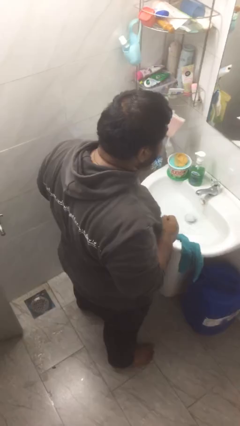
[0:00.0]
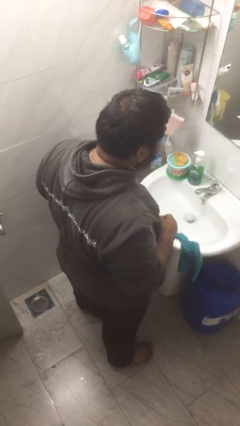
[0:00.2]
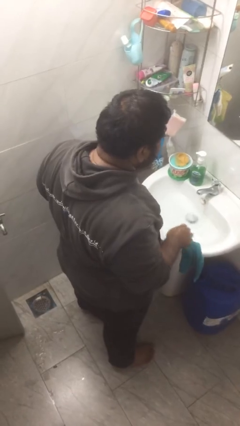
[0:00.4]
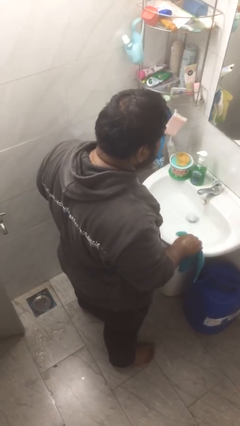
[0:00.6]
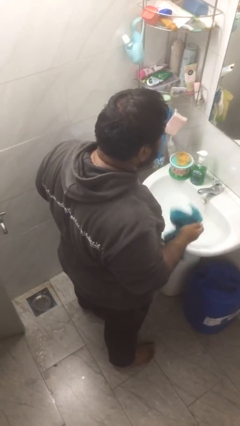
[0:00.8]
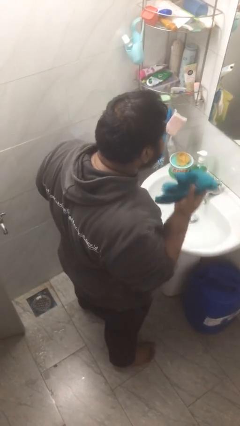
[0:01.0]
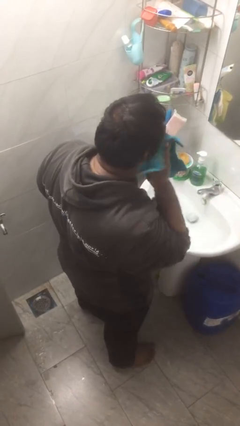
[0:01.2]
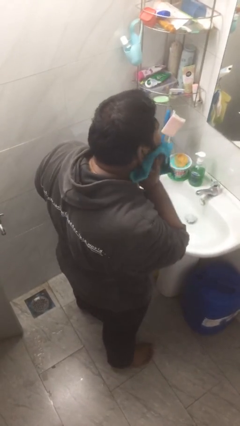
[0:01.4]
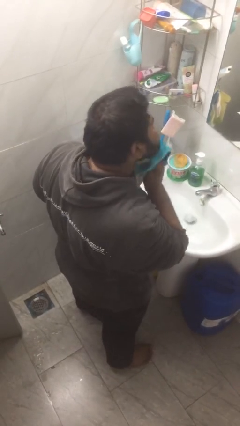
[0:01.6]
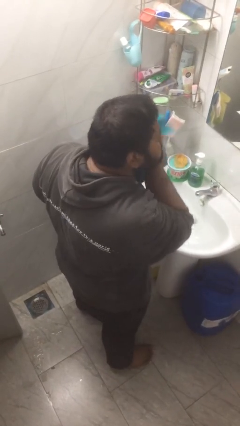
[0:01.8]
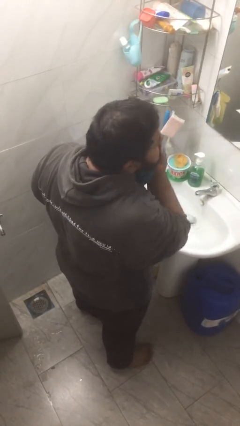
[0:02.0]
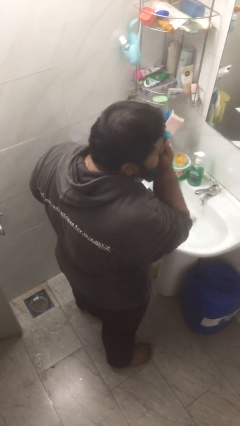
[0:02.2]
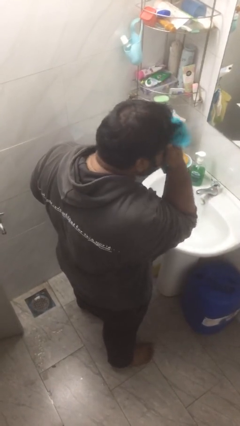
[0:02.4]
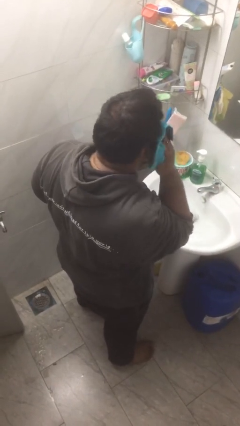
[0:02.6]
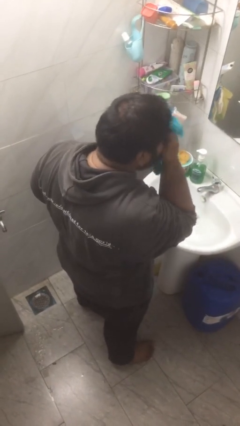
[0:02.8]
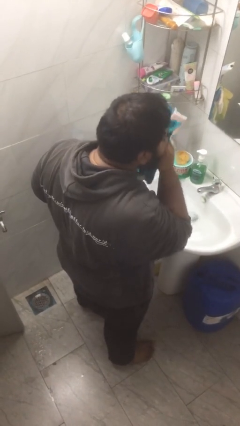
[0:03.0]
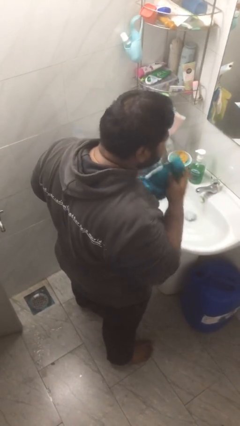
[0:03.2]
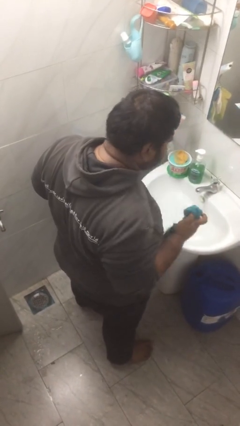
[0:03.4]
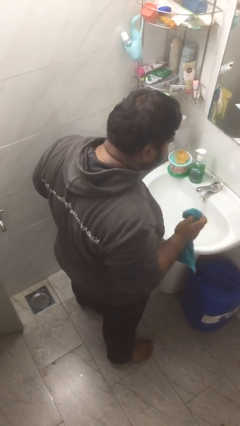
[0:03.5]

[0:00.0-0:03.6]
person dries face with towel

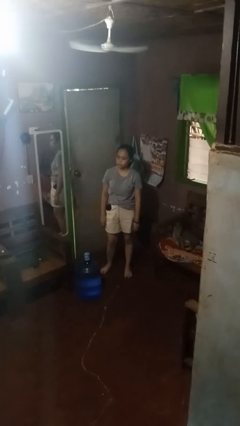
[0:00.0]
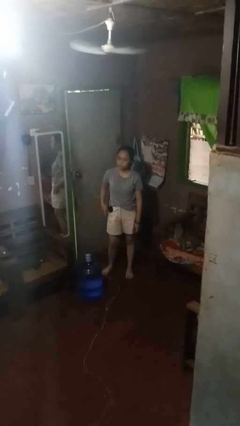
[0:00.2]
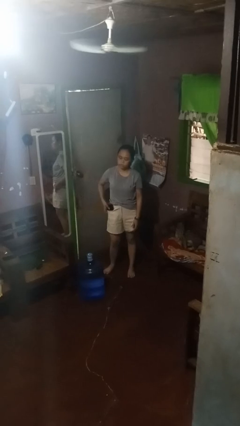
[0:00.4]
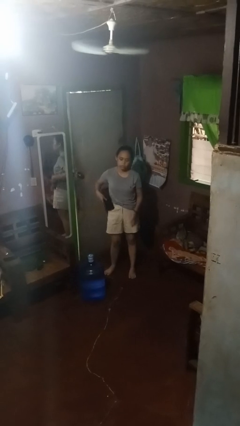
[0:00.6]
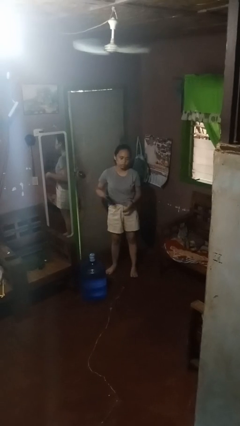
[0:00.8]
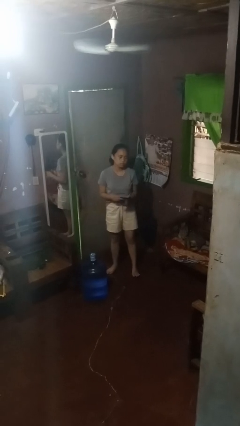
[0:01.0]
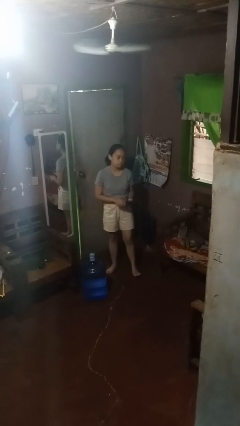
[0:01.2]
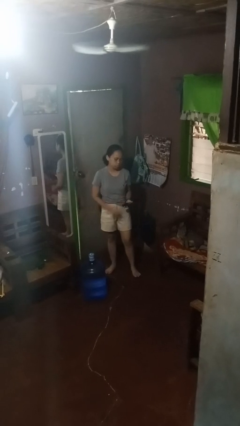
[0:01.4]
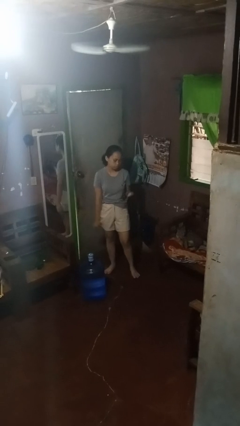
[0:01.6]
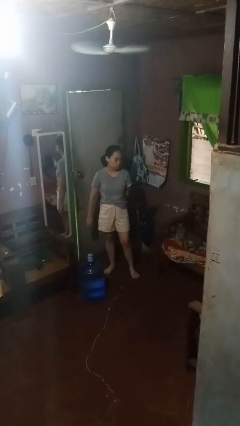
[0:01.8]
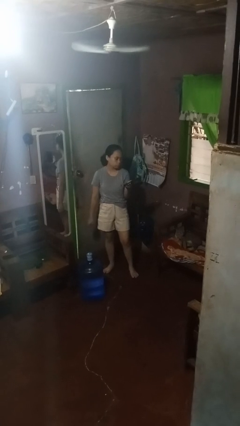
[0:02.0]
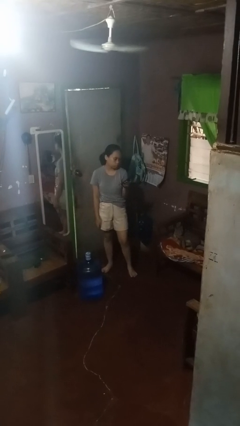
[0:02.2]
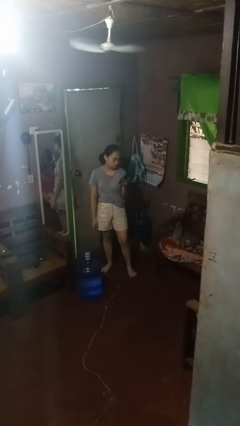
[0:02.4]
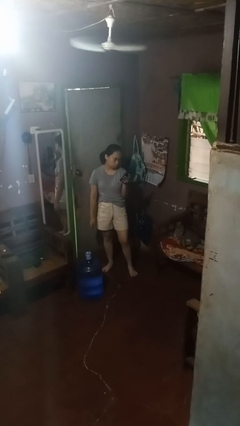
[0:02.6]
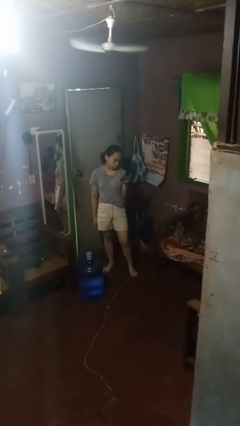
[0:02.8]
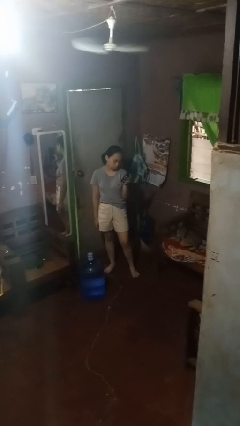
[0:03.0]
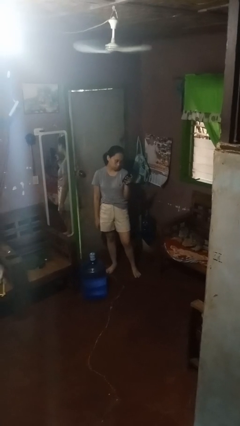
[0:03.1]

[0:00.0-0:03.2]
person takes phone from pocket

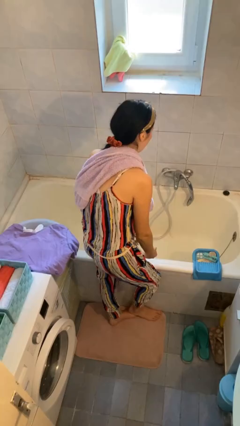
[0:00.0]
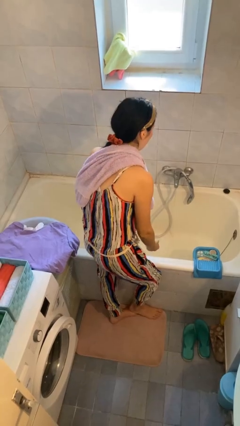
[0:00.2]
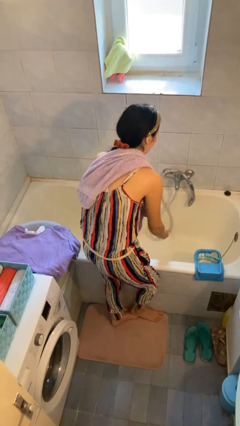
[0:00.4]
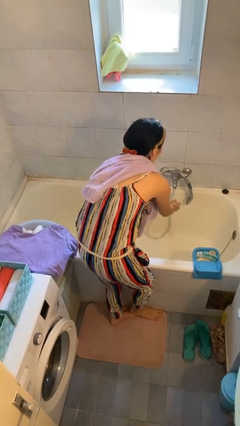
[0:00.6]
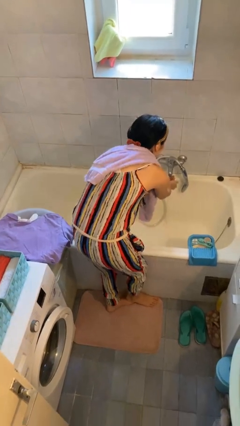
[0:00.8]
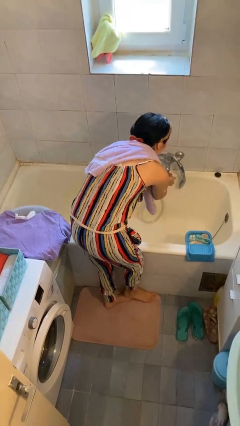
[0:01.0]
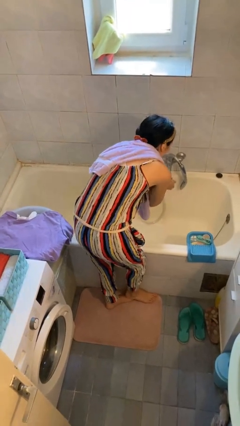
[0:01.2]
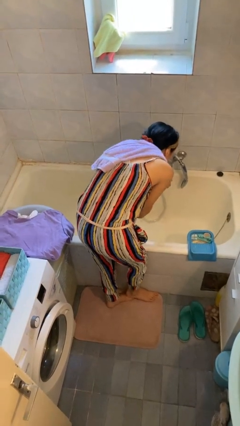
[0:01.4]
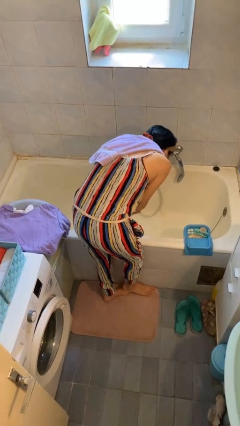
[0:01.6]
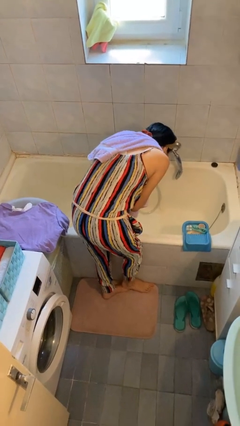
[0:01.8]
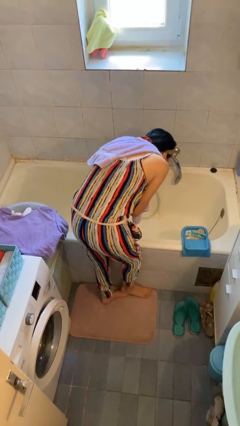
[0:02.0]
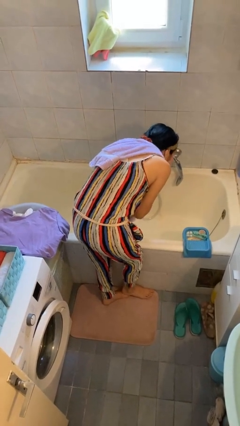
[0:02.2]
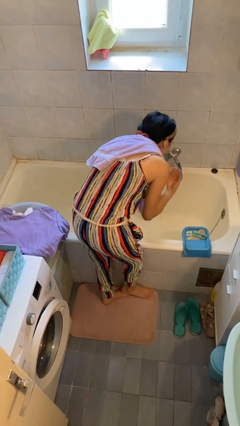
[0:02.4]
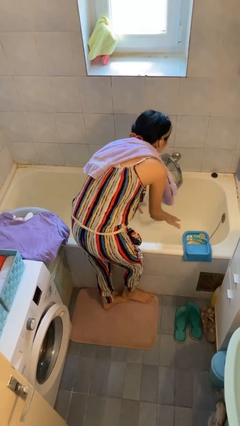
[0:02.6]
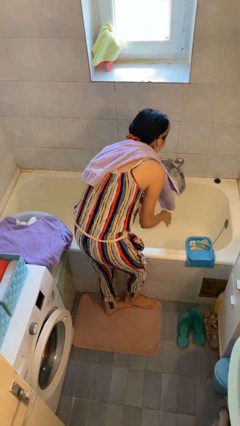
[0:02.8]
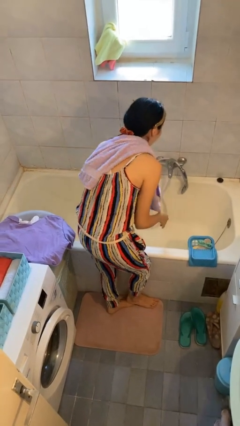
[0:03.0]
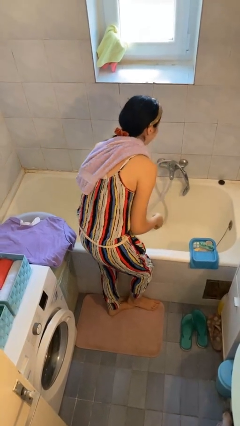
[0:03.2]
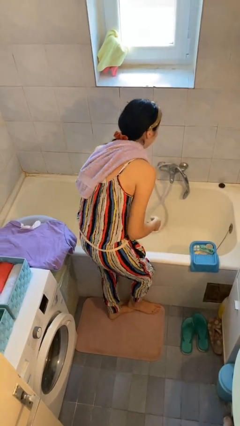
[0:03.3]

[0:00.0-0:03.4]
person washes face

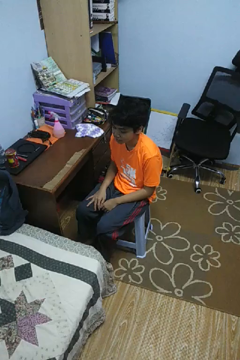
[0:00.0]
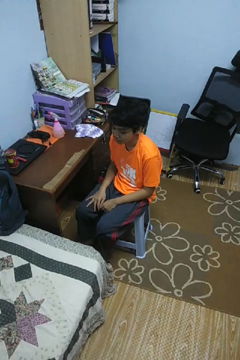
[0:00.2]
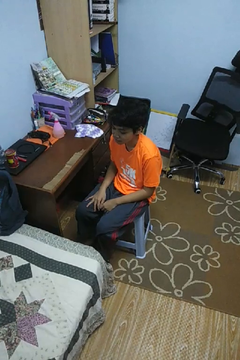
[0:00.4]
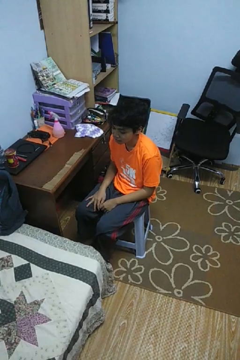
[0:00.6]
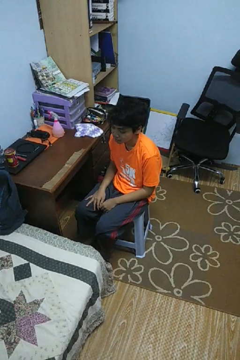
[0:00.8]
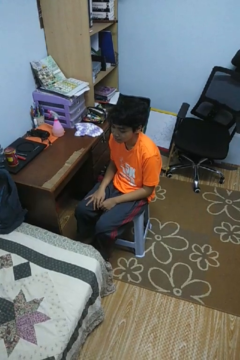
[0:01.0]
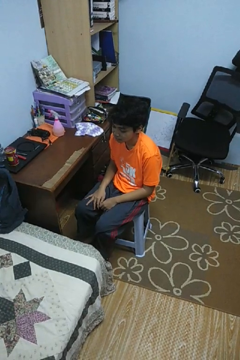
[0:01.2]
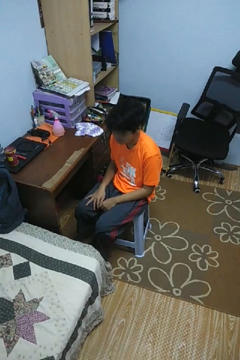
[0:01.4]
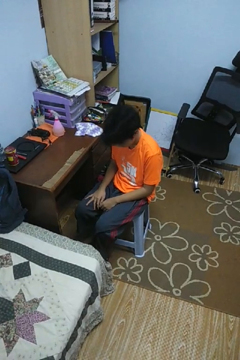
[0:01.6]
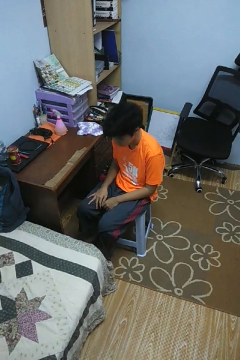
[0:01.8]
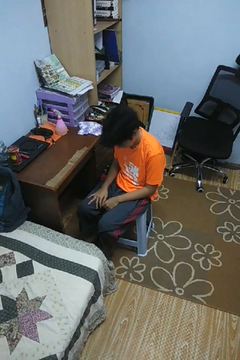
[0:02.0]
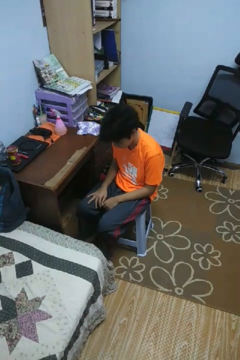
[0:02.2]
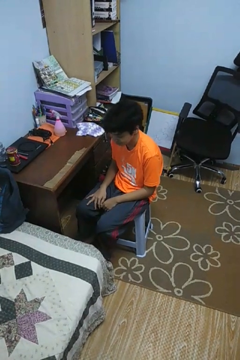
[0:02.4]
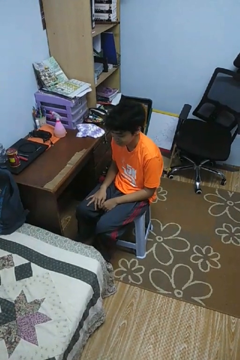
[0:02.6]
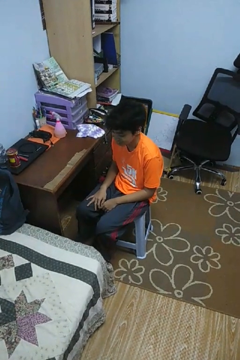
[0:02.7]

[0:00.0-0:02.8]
person nods head

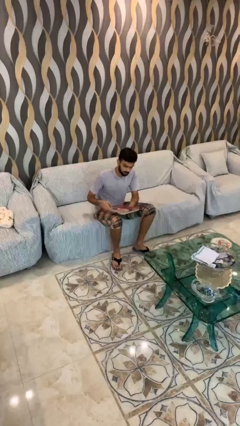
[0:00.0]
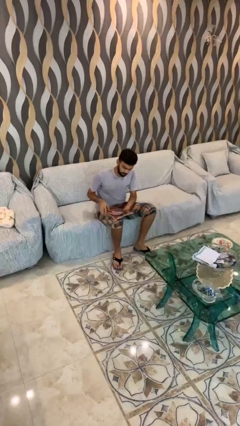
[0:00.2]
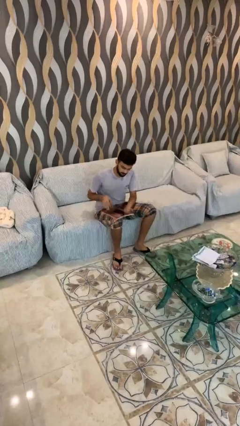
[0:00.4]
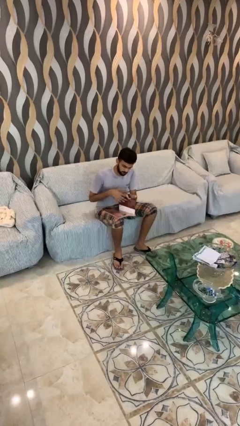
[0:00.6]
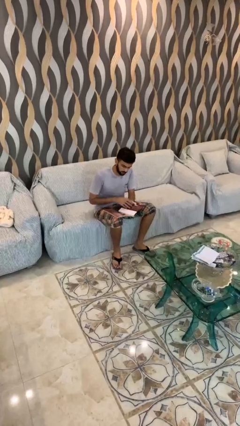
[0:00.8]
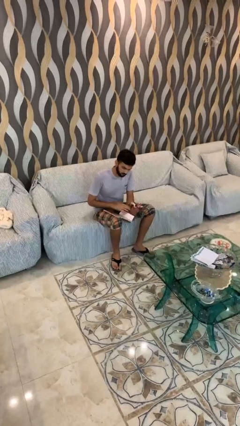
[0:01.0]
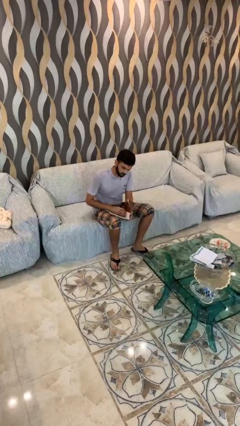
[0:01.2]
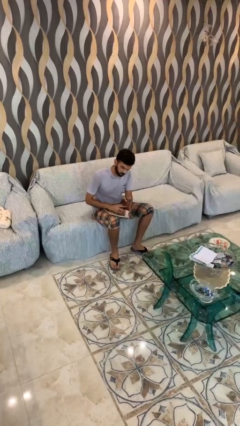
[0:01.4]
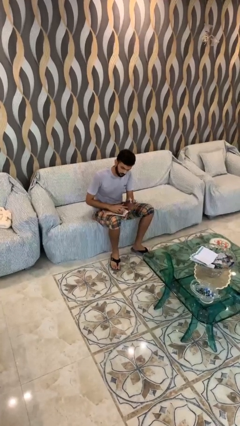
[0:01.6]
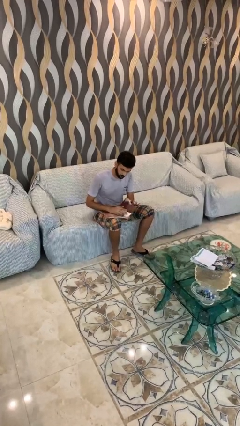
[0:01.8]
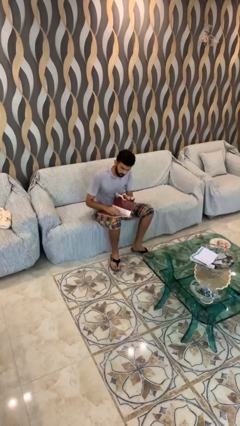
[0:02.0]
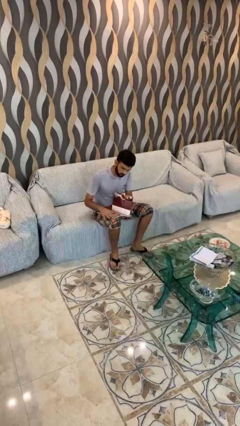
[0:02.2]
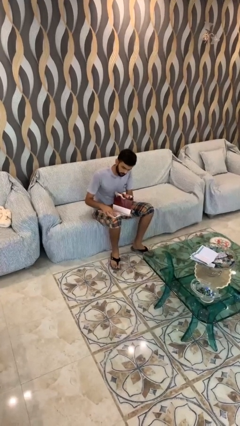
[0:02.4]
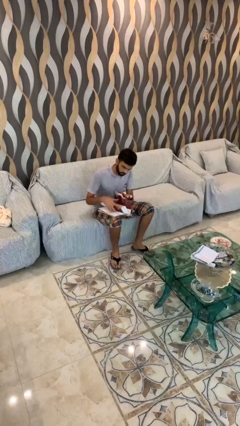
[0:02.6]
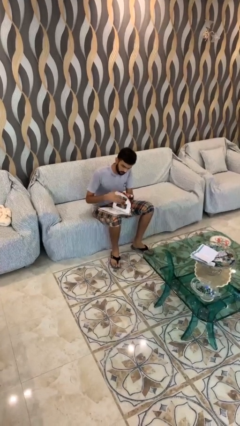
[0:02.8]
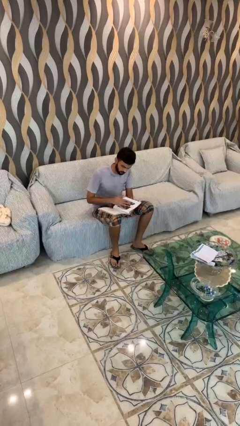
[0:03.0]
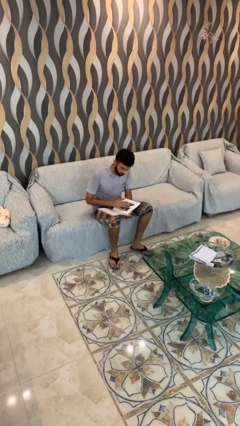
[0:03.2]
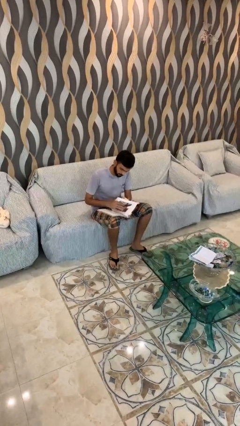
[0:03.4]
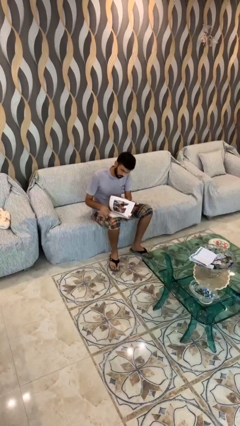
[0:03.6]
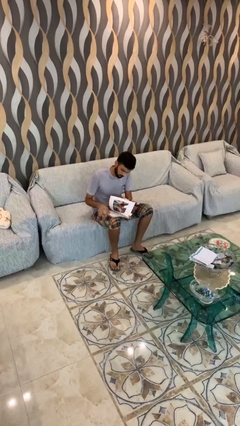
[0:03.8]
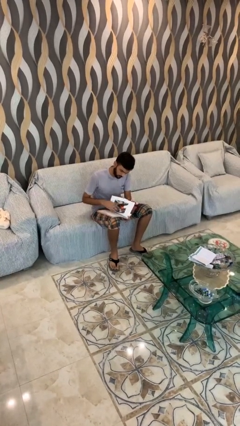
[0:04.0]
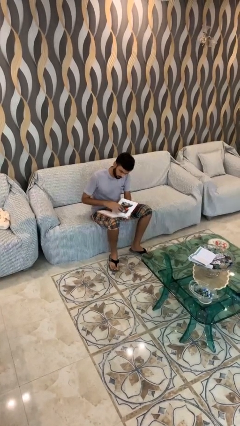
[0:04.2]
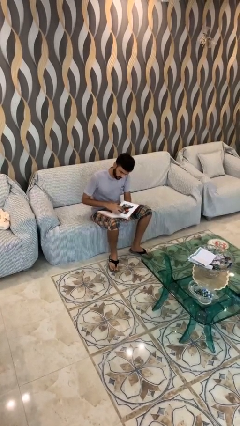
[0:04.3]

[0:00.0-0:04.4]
person reads document

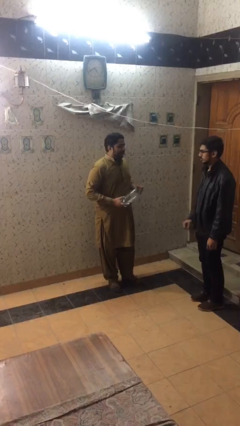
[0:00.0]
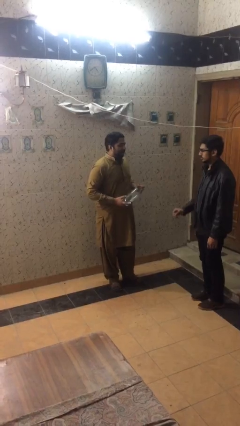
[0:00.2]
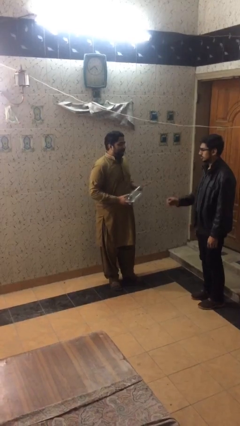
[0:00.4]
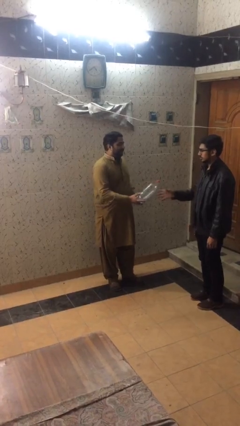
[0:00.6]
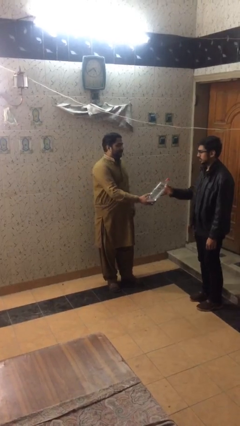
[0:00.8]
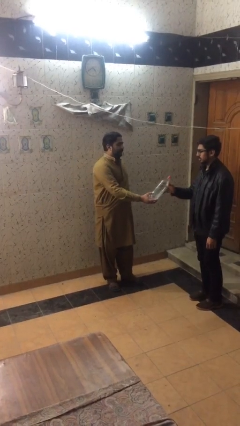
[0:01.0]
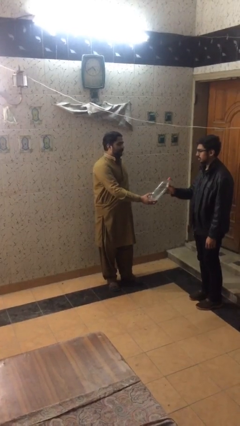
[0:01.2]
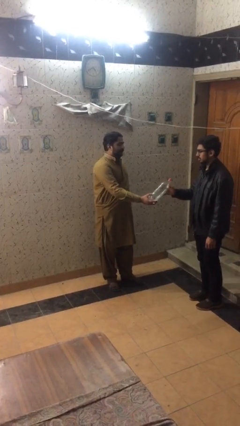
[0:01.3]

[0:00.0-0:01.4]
person transfers object to person
